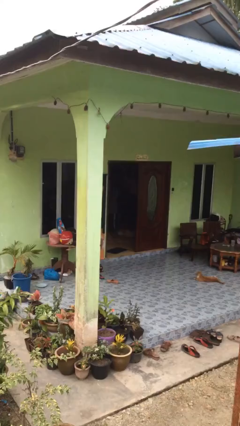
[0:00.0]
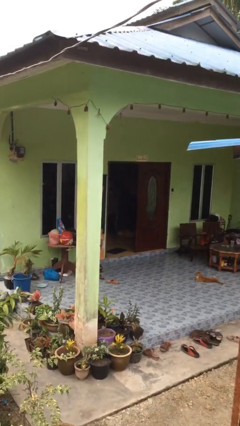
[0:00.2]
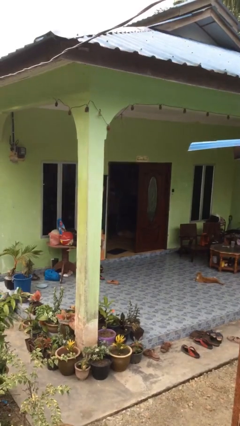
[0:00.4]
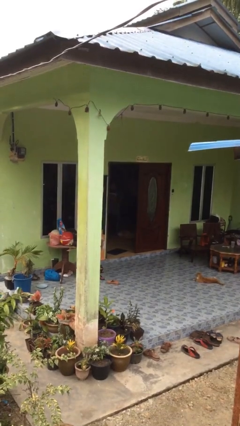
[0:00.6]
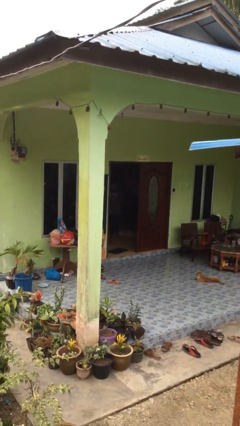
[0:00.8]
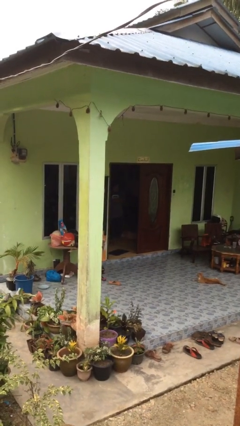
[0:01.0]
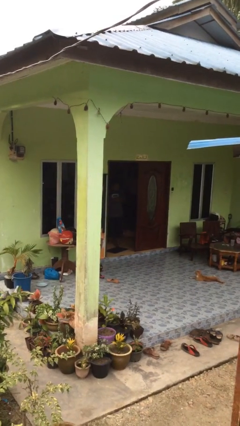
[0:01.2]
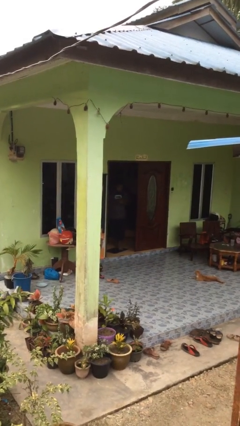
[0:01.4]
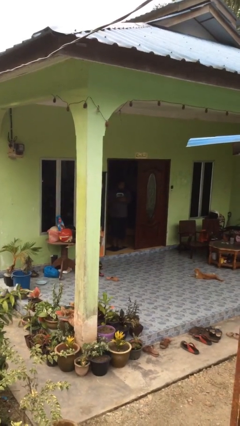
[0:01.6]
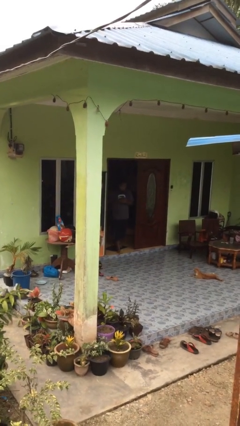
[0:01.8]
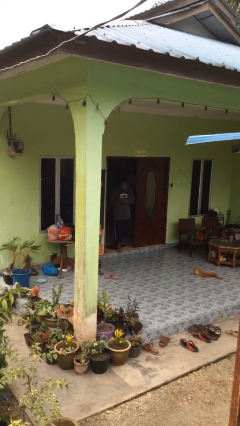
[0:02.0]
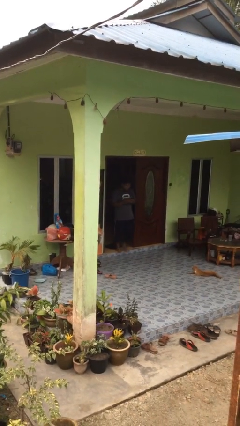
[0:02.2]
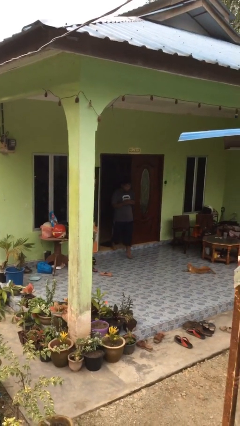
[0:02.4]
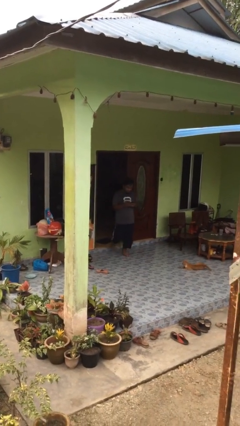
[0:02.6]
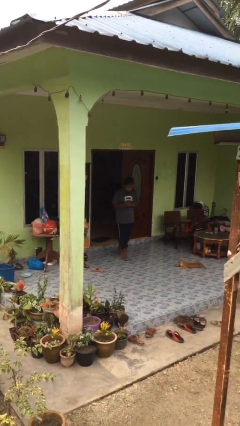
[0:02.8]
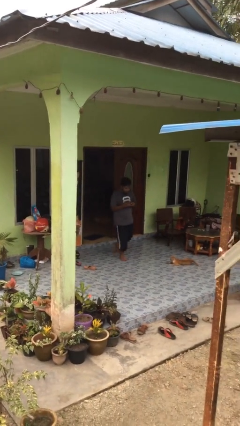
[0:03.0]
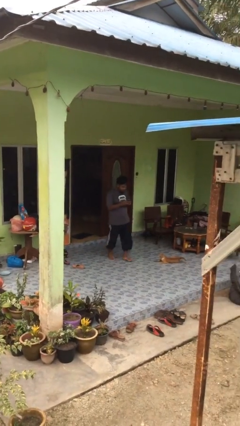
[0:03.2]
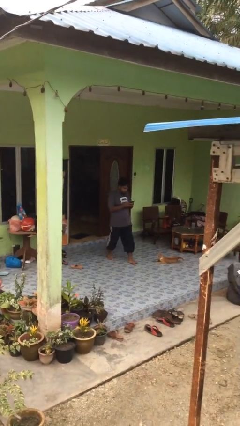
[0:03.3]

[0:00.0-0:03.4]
person enters scene through structure

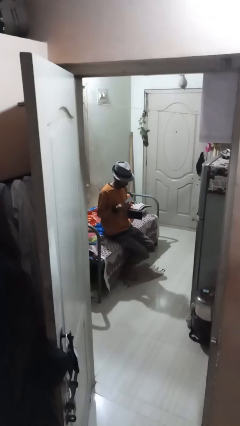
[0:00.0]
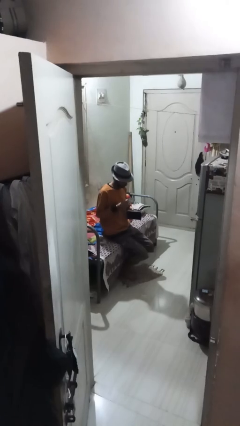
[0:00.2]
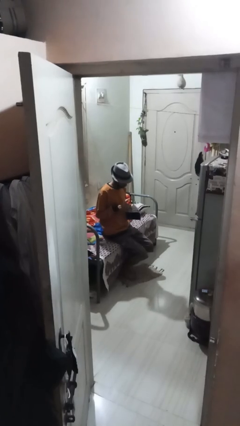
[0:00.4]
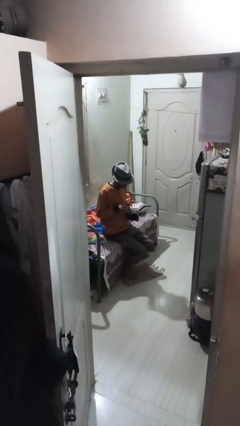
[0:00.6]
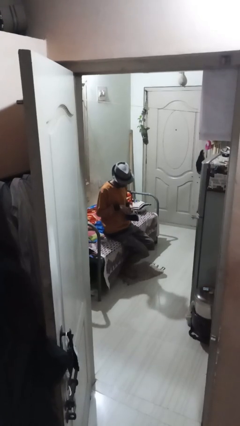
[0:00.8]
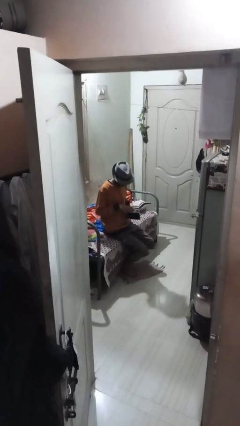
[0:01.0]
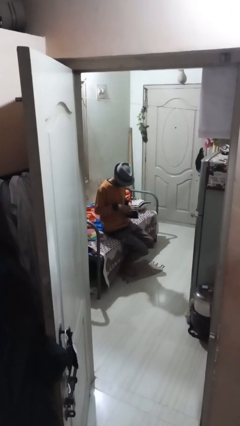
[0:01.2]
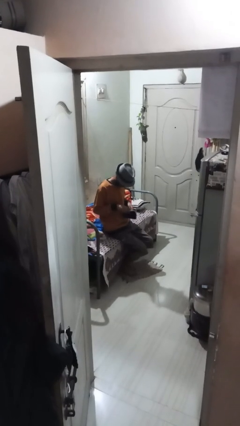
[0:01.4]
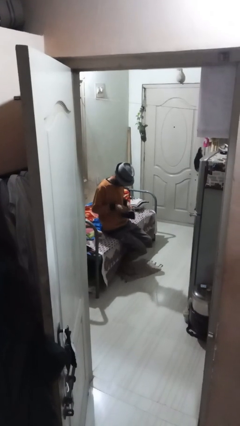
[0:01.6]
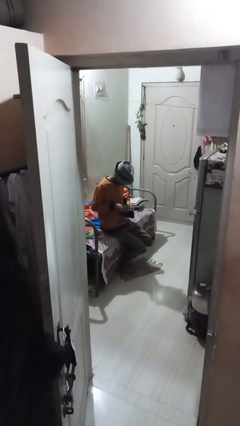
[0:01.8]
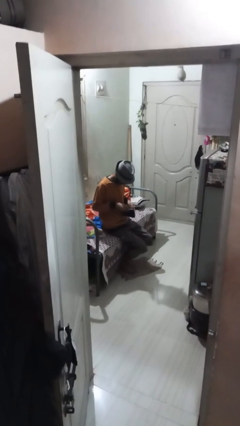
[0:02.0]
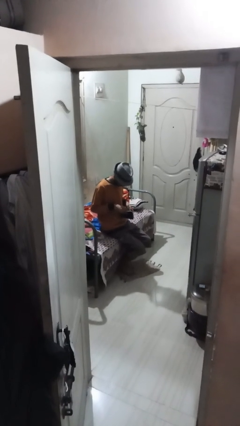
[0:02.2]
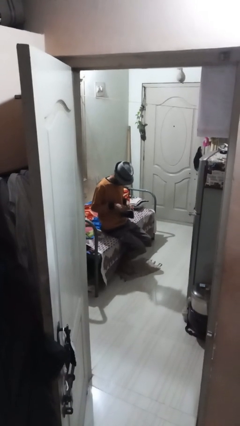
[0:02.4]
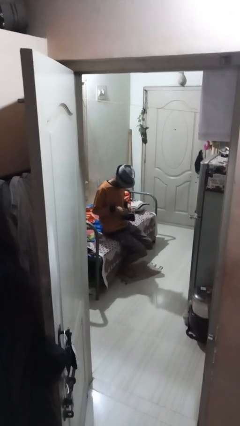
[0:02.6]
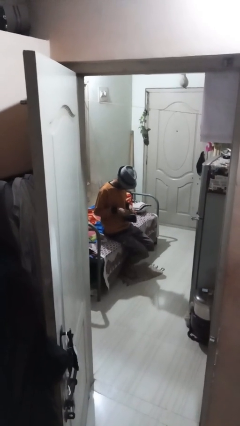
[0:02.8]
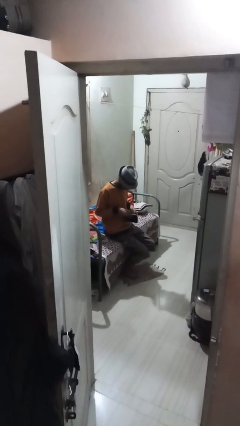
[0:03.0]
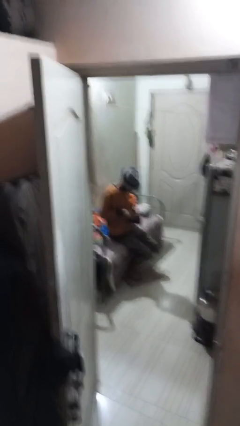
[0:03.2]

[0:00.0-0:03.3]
person puts object into purse

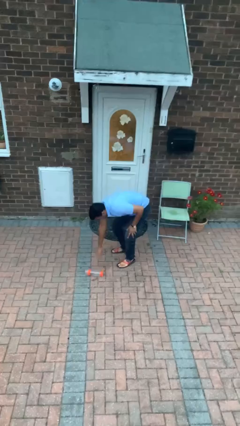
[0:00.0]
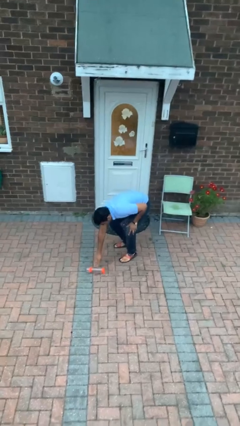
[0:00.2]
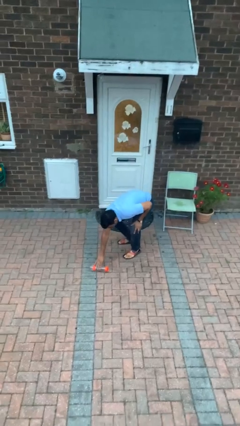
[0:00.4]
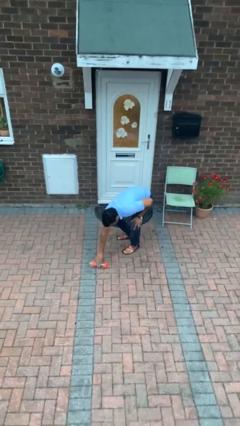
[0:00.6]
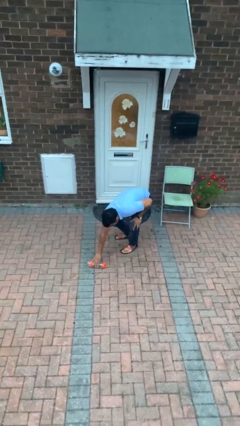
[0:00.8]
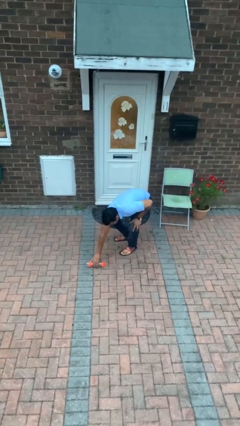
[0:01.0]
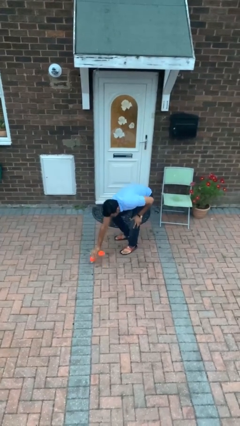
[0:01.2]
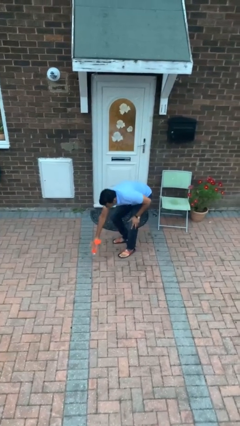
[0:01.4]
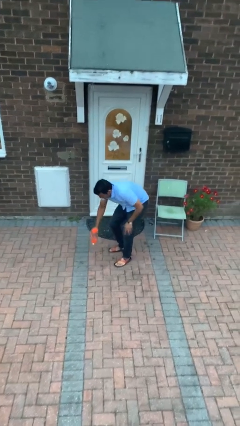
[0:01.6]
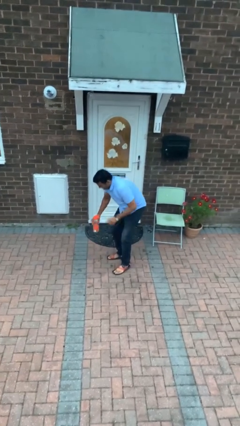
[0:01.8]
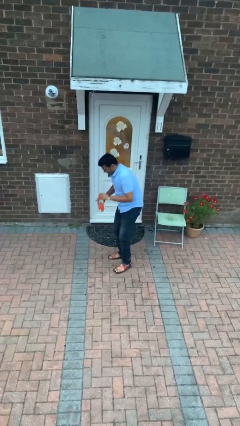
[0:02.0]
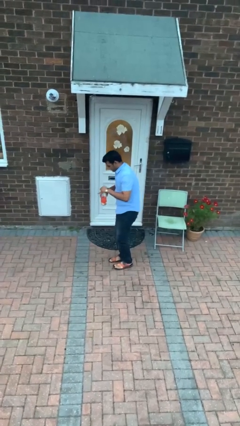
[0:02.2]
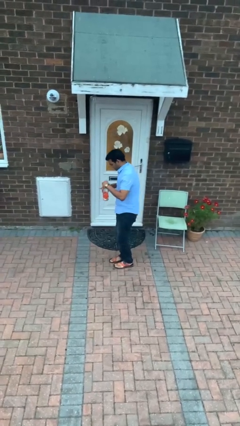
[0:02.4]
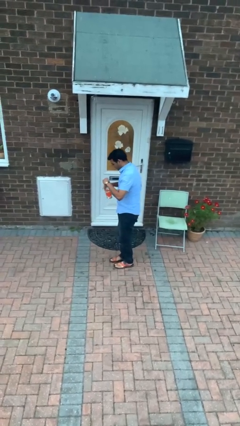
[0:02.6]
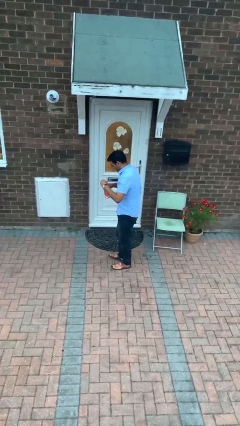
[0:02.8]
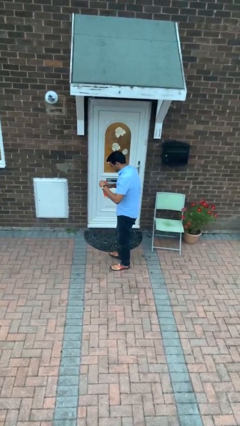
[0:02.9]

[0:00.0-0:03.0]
person picks up object from floor

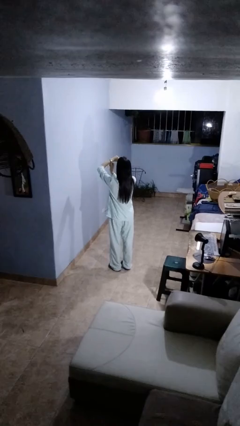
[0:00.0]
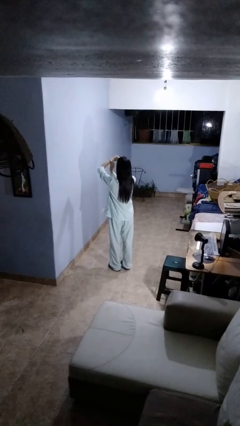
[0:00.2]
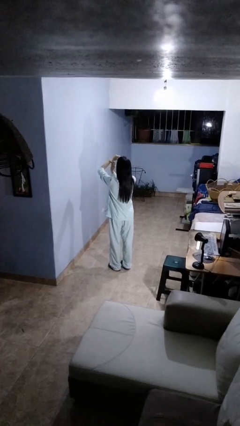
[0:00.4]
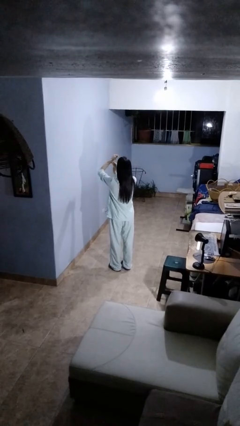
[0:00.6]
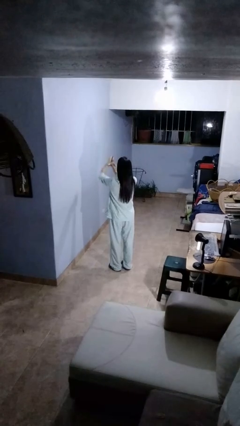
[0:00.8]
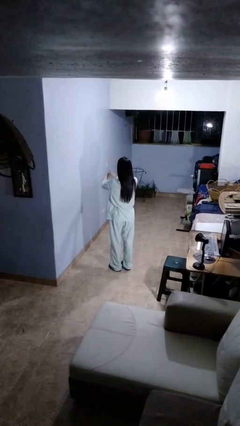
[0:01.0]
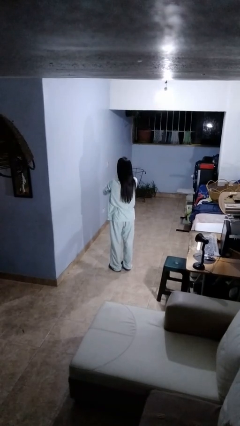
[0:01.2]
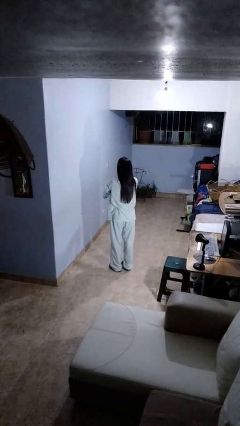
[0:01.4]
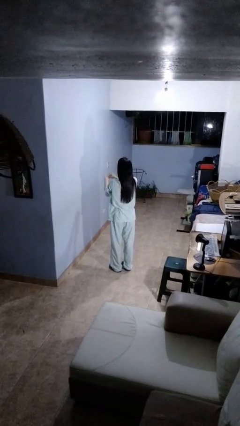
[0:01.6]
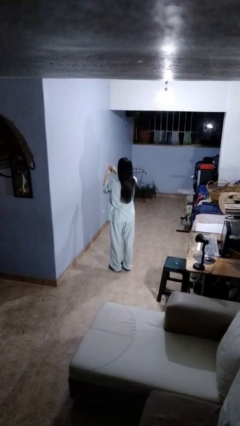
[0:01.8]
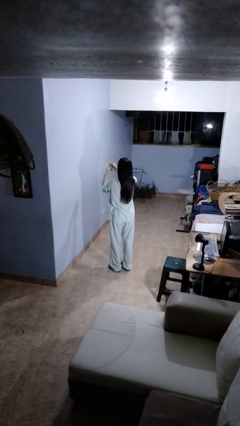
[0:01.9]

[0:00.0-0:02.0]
person takes off wristwatch

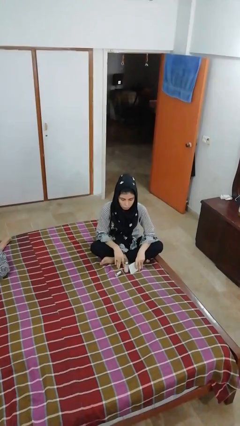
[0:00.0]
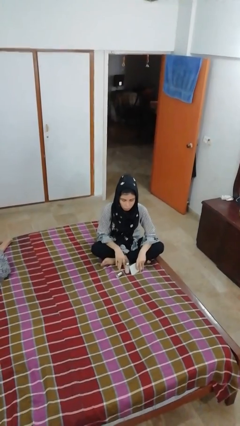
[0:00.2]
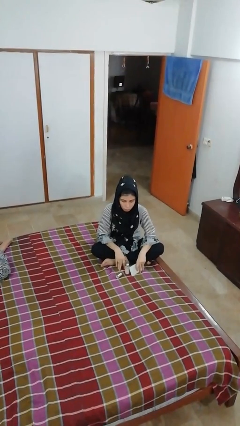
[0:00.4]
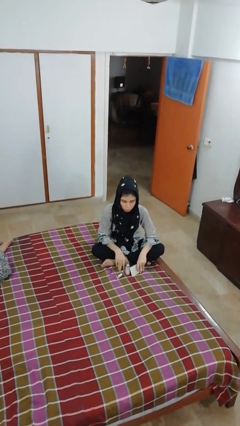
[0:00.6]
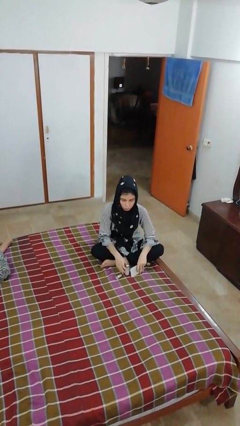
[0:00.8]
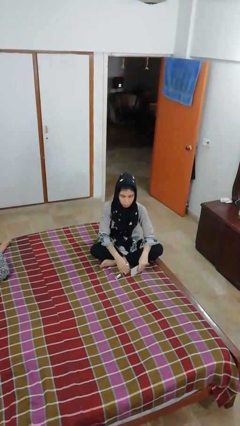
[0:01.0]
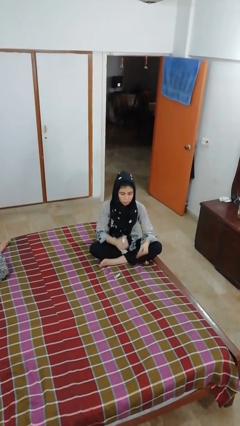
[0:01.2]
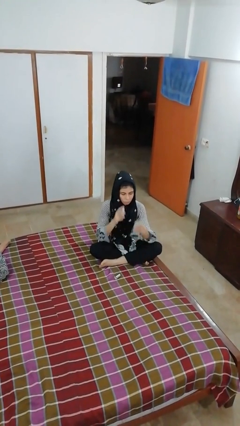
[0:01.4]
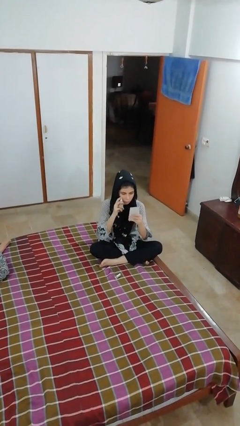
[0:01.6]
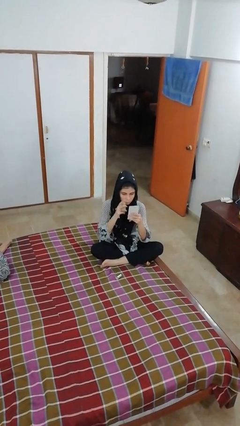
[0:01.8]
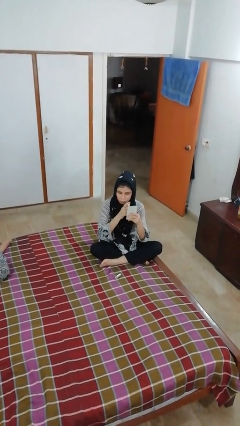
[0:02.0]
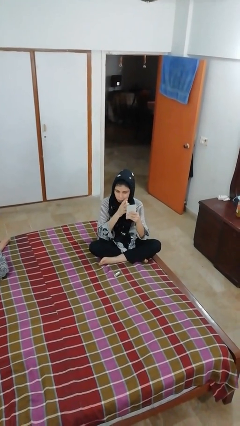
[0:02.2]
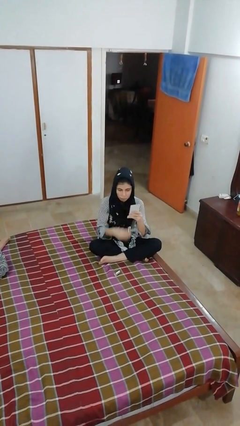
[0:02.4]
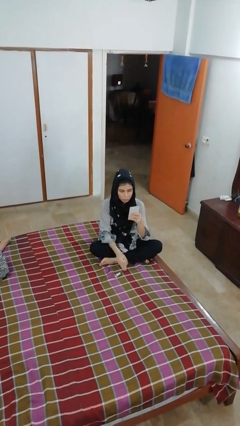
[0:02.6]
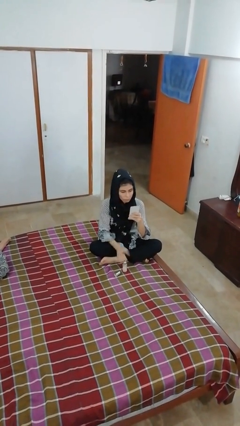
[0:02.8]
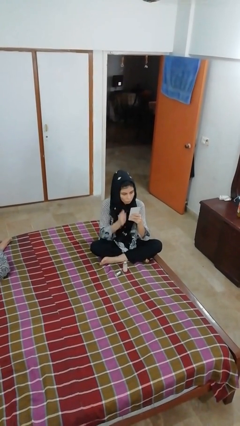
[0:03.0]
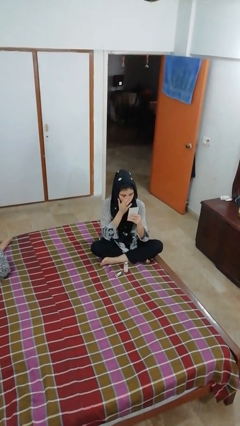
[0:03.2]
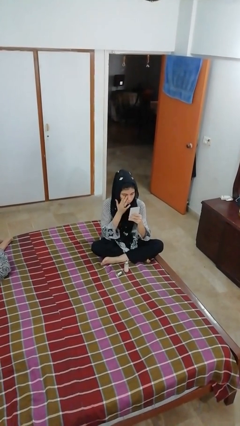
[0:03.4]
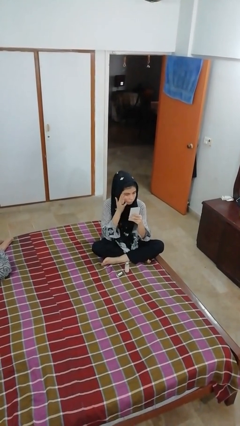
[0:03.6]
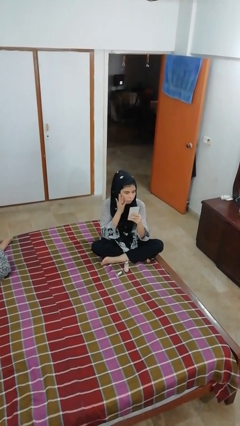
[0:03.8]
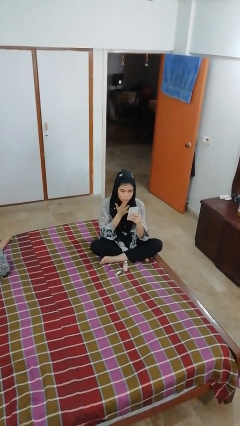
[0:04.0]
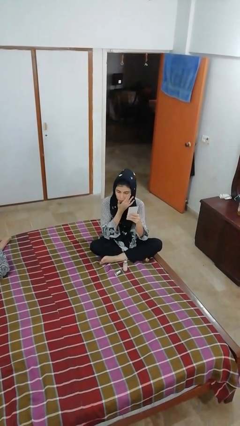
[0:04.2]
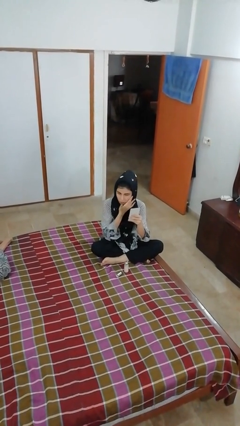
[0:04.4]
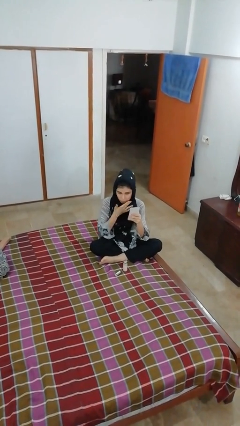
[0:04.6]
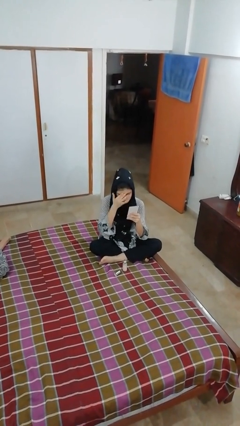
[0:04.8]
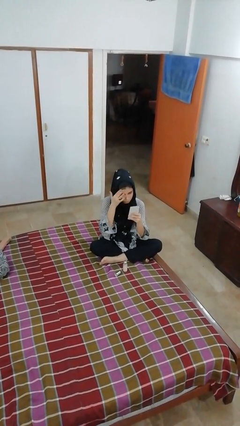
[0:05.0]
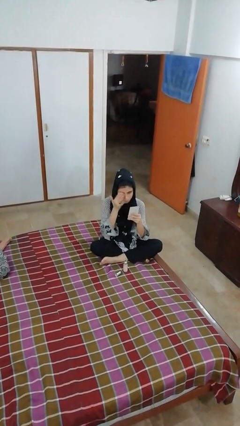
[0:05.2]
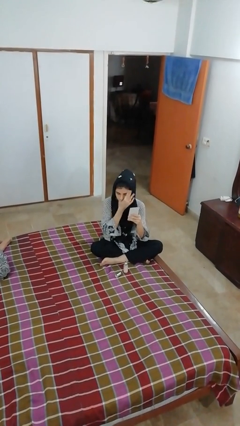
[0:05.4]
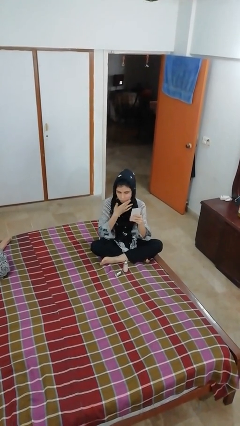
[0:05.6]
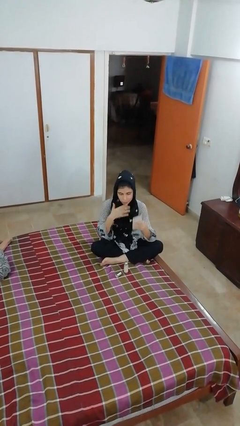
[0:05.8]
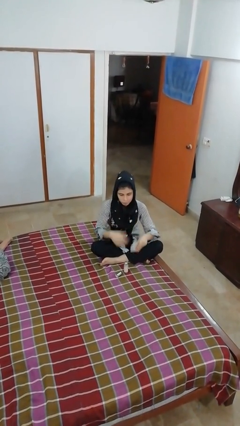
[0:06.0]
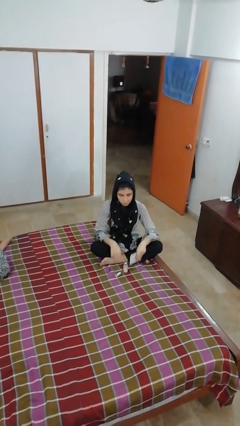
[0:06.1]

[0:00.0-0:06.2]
person applies foundation makeup
